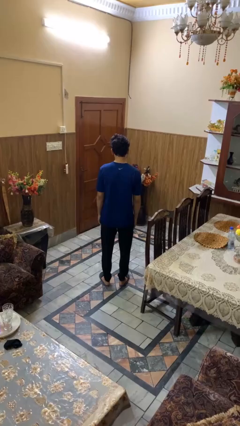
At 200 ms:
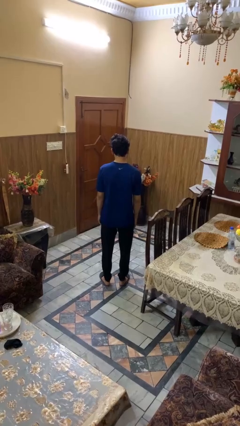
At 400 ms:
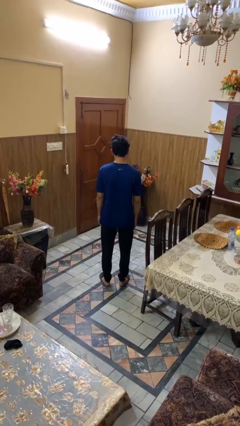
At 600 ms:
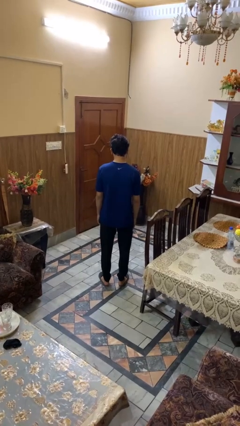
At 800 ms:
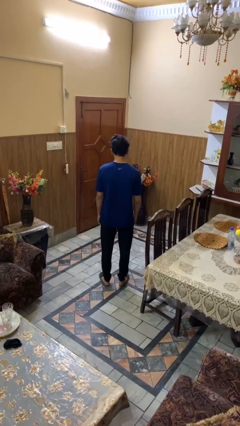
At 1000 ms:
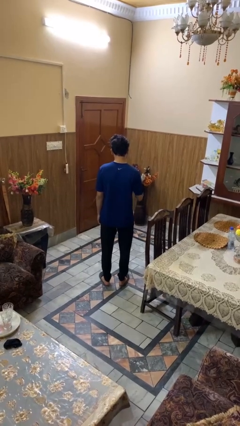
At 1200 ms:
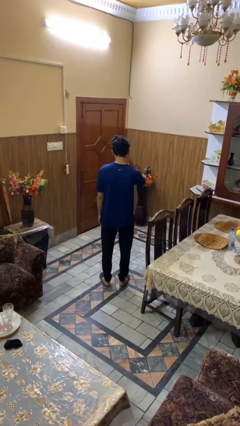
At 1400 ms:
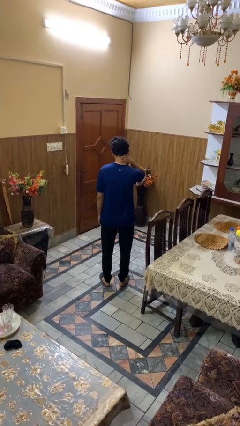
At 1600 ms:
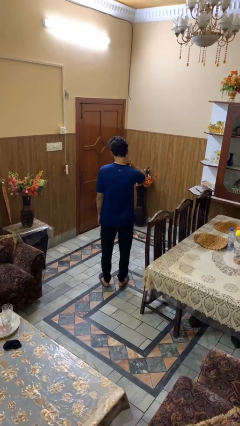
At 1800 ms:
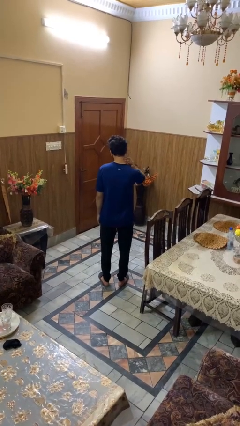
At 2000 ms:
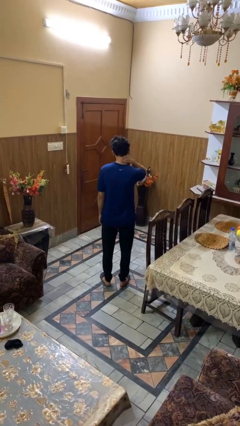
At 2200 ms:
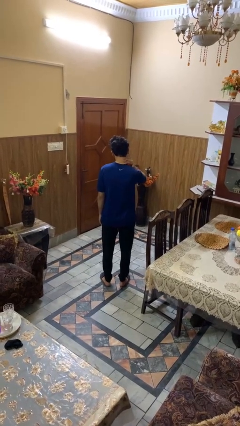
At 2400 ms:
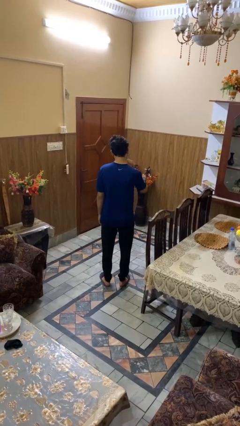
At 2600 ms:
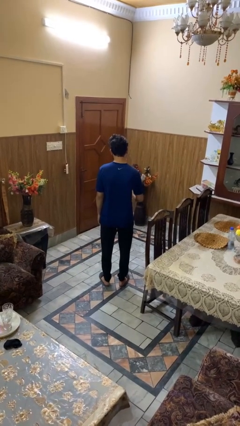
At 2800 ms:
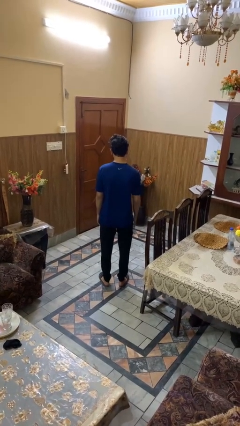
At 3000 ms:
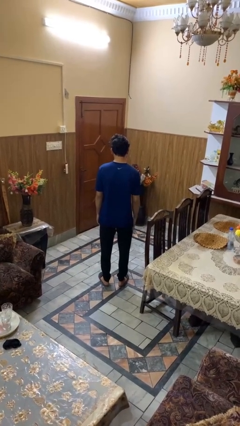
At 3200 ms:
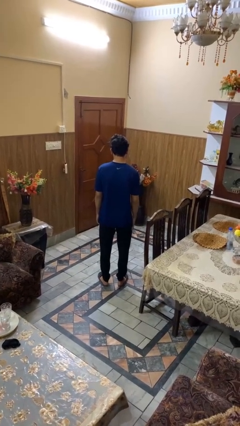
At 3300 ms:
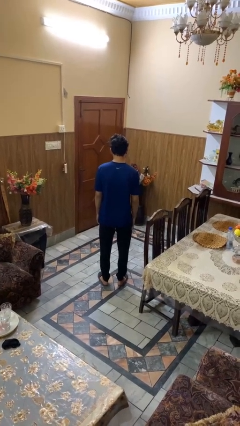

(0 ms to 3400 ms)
person rubs neck

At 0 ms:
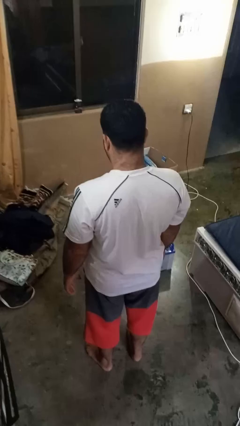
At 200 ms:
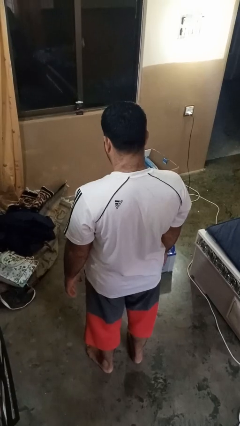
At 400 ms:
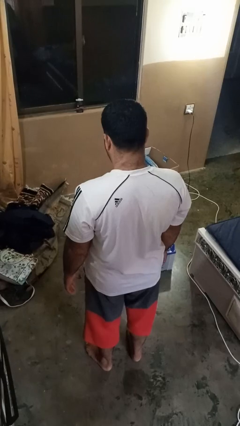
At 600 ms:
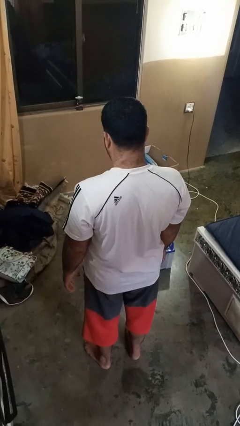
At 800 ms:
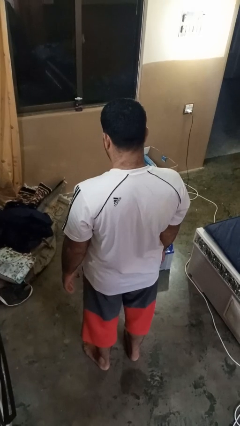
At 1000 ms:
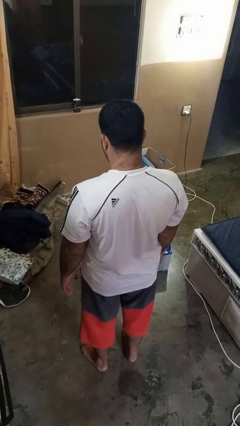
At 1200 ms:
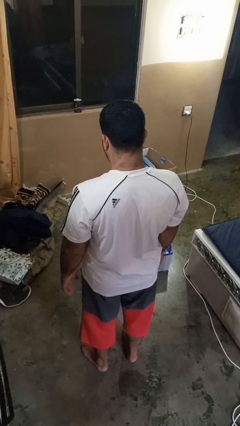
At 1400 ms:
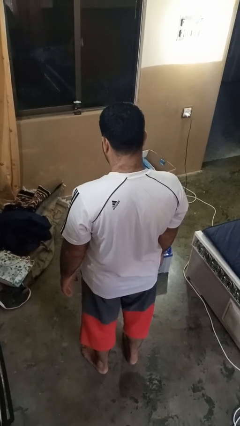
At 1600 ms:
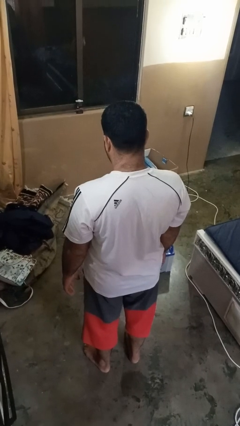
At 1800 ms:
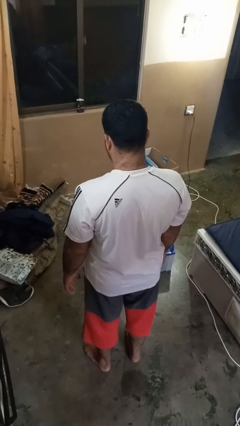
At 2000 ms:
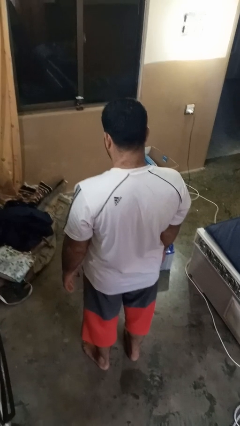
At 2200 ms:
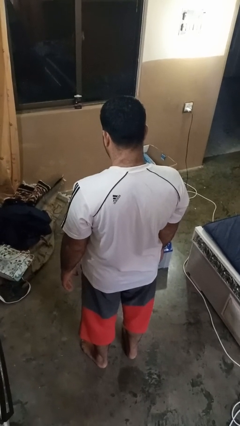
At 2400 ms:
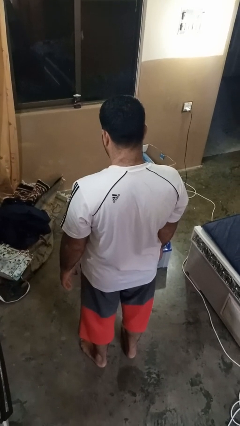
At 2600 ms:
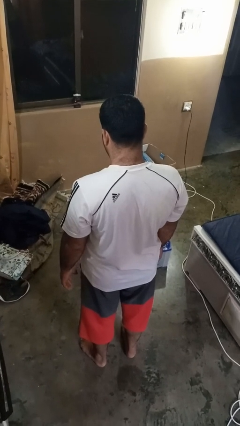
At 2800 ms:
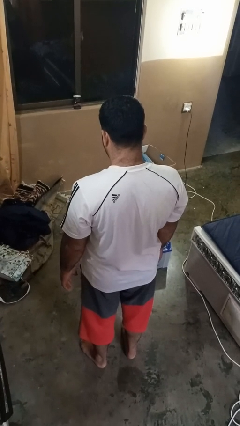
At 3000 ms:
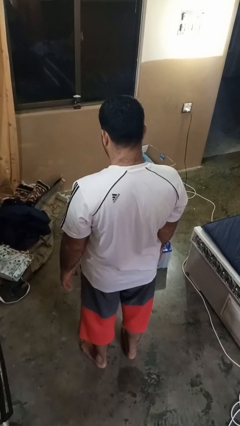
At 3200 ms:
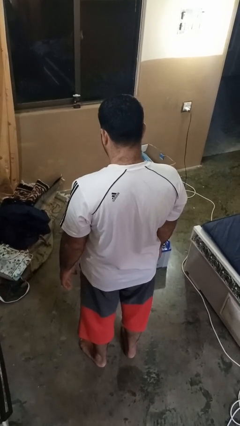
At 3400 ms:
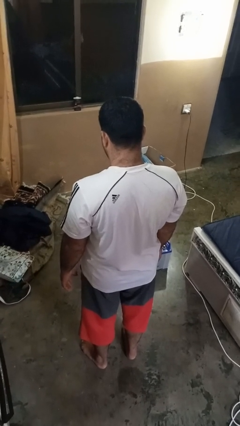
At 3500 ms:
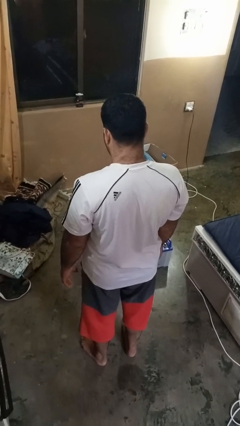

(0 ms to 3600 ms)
person trips on object on floor

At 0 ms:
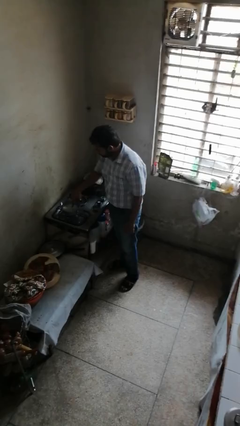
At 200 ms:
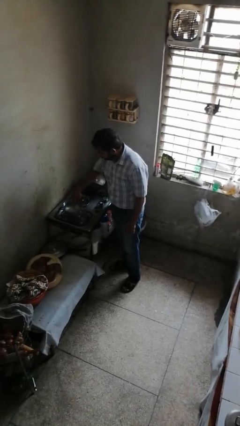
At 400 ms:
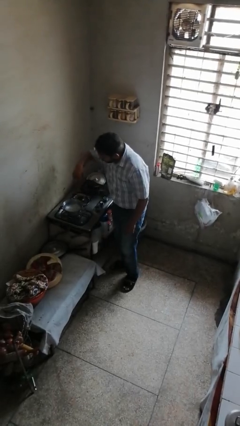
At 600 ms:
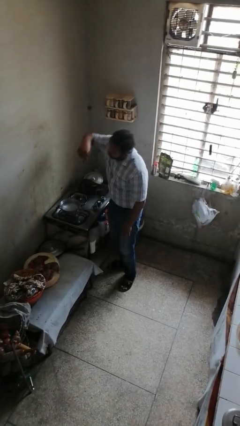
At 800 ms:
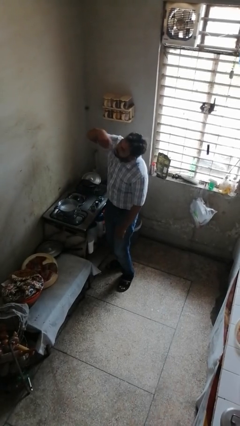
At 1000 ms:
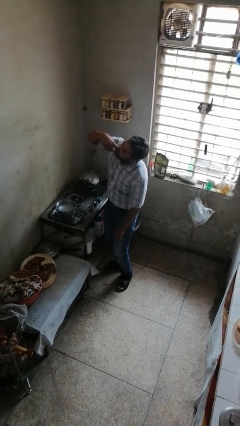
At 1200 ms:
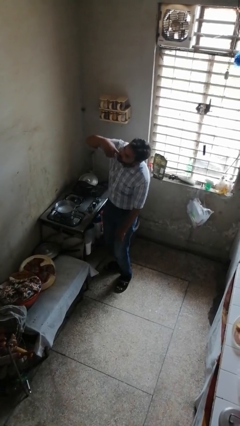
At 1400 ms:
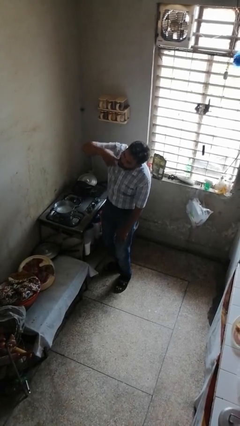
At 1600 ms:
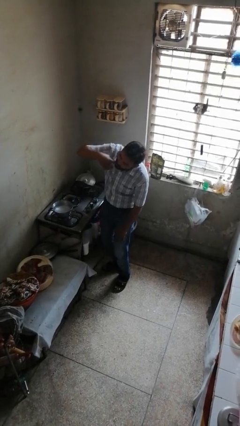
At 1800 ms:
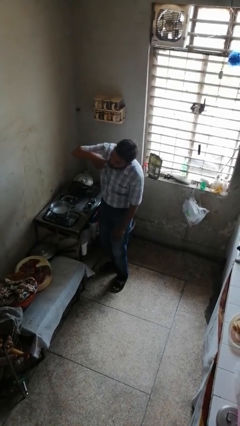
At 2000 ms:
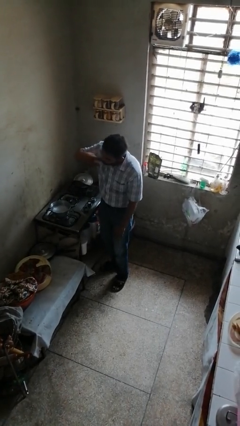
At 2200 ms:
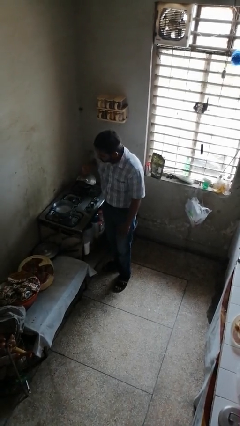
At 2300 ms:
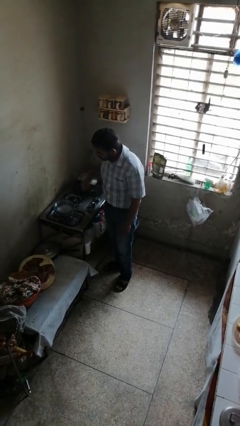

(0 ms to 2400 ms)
person burns hand

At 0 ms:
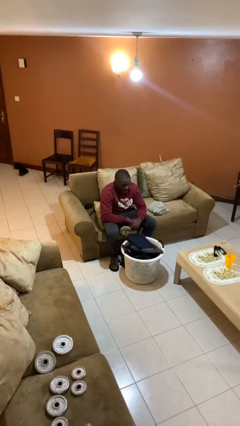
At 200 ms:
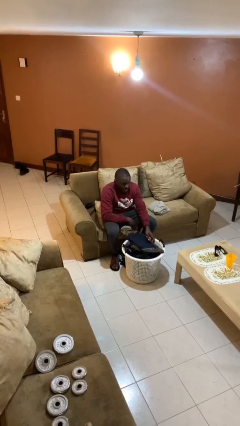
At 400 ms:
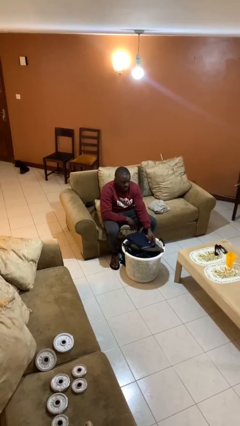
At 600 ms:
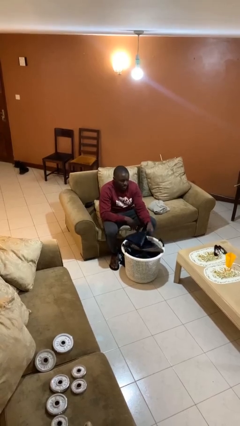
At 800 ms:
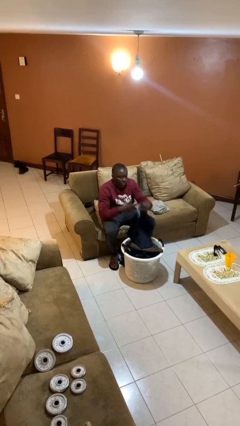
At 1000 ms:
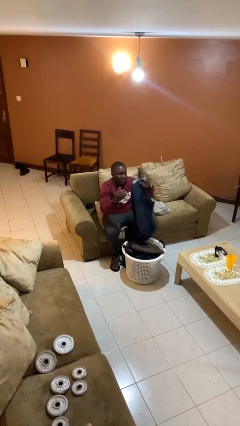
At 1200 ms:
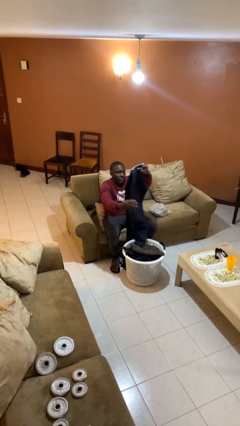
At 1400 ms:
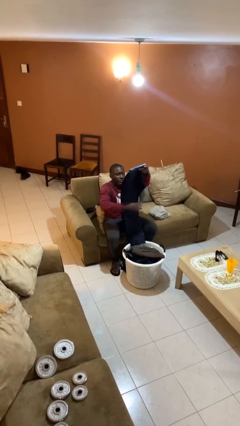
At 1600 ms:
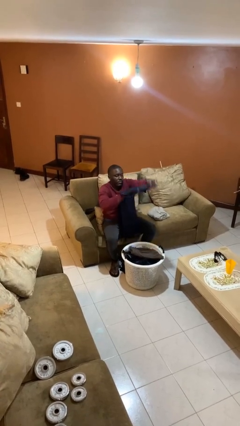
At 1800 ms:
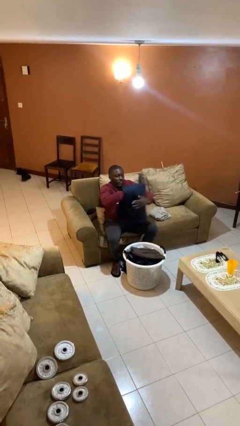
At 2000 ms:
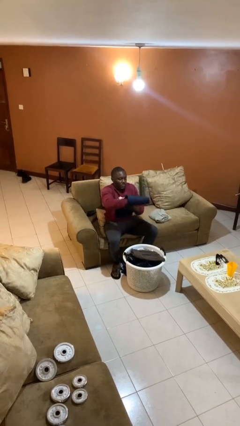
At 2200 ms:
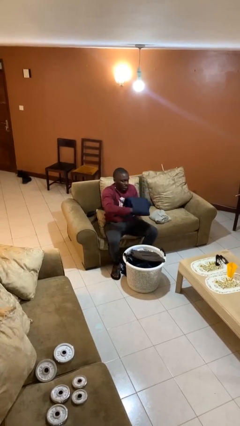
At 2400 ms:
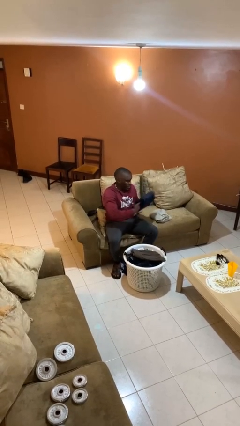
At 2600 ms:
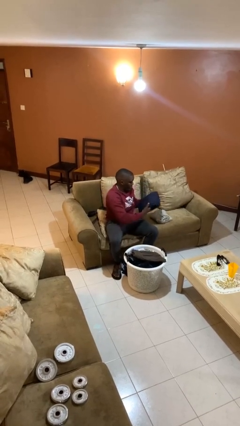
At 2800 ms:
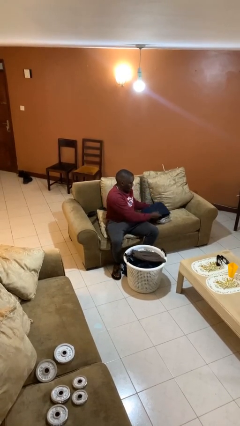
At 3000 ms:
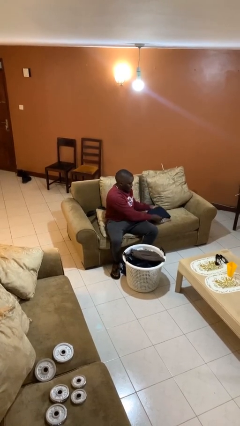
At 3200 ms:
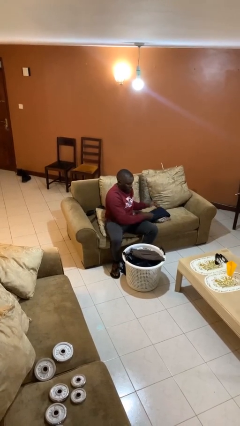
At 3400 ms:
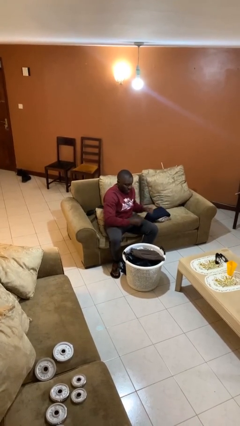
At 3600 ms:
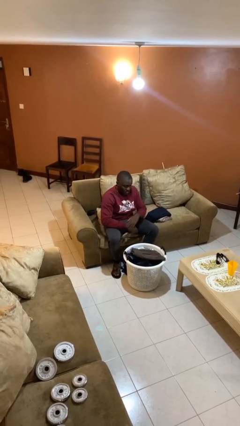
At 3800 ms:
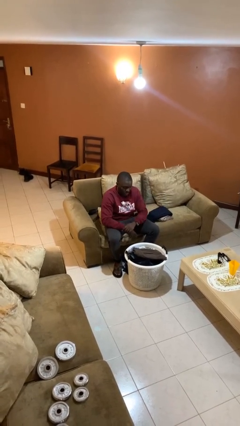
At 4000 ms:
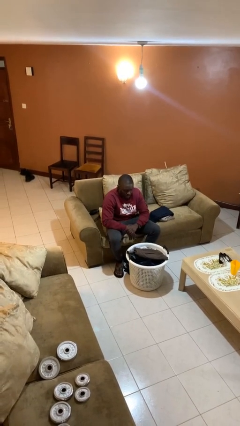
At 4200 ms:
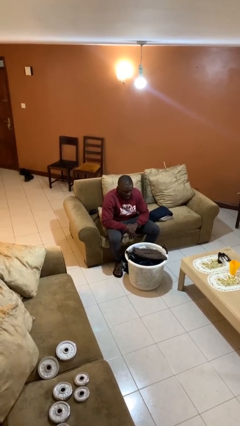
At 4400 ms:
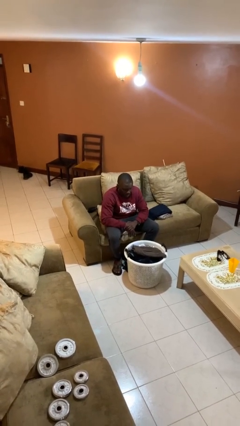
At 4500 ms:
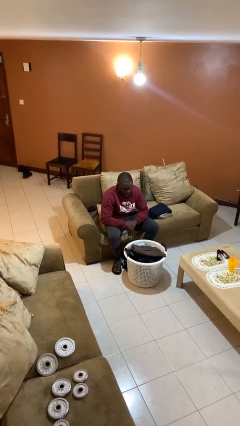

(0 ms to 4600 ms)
person folds pants

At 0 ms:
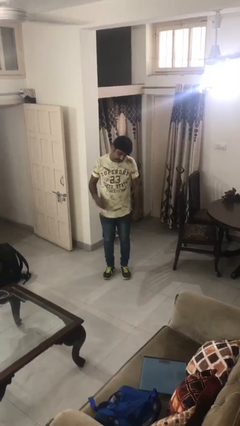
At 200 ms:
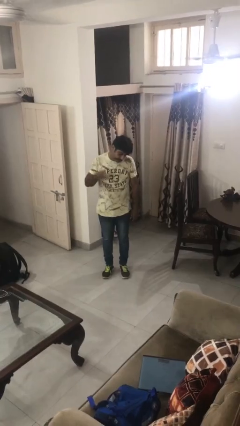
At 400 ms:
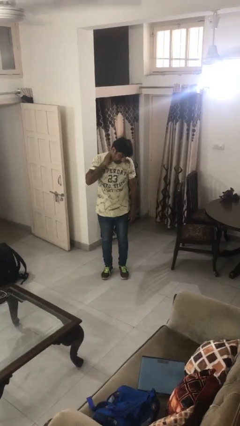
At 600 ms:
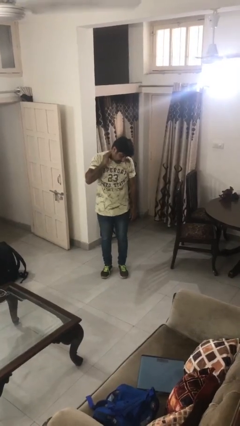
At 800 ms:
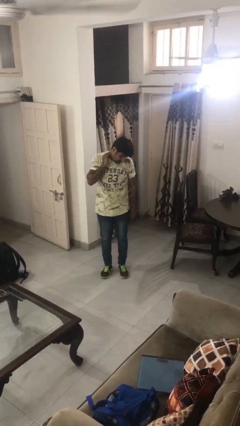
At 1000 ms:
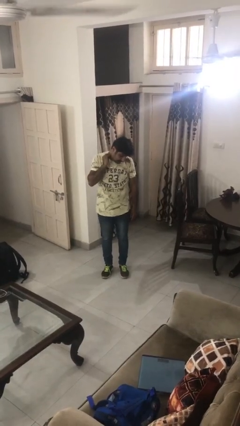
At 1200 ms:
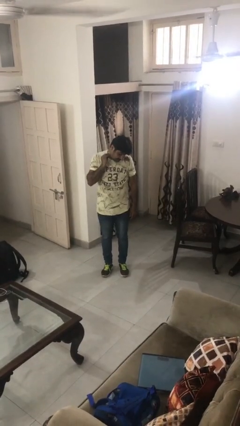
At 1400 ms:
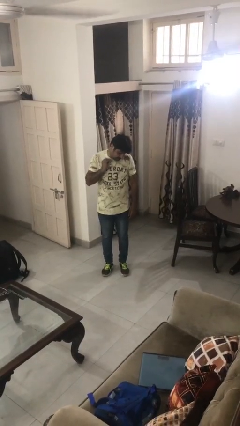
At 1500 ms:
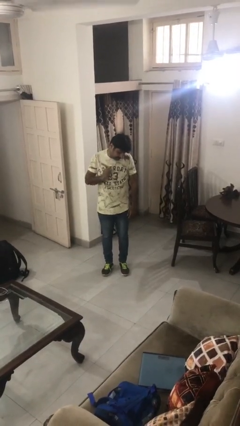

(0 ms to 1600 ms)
person swats bug

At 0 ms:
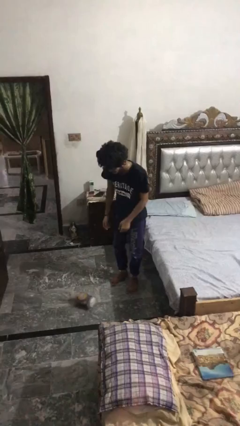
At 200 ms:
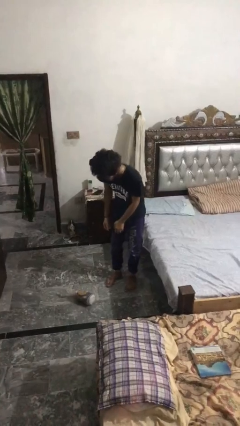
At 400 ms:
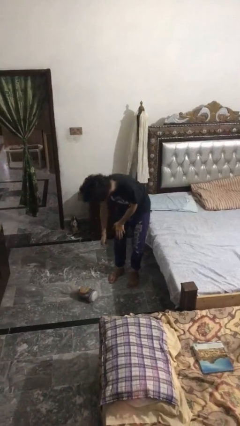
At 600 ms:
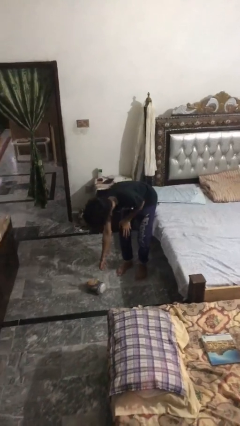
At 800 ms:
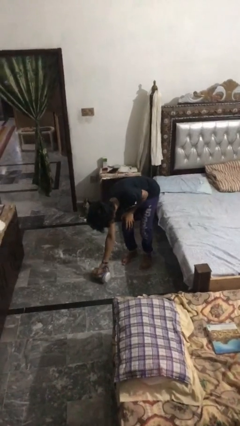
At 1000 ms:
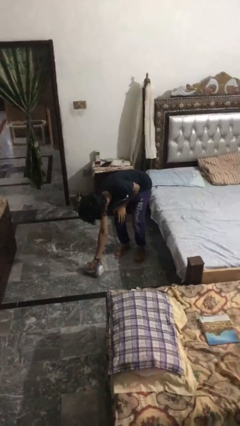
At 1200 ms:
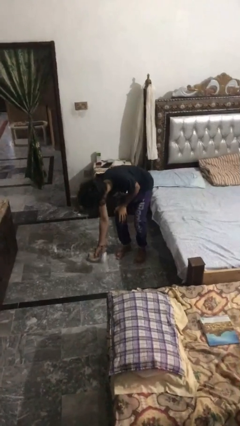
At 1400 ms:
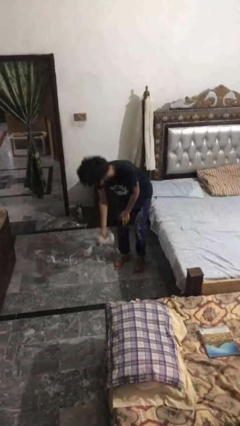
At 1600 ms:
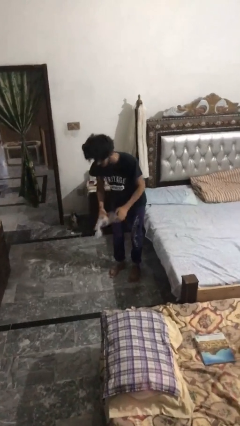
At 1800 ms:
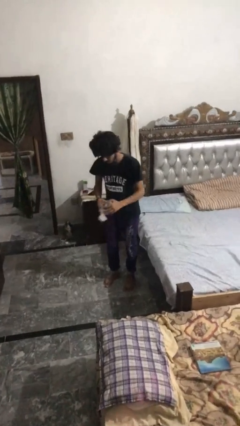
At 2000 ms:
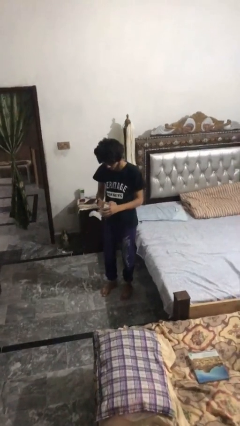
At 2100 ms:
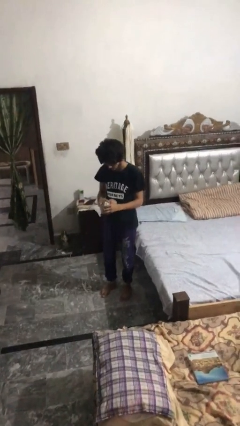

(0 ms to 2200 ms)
person picks up object from floor
